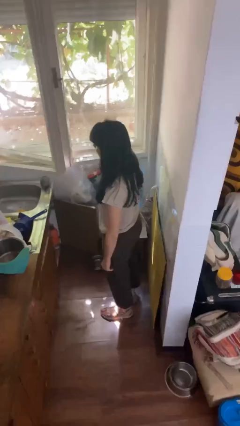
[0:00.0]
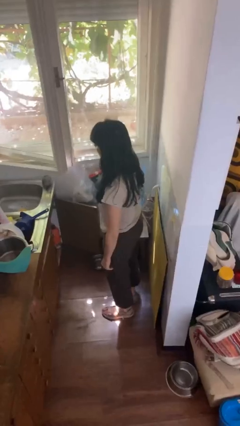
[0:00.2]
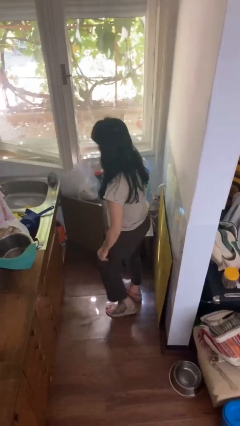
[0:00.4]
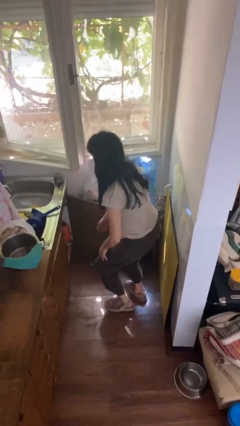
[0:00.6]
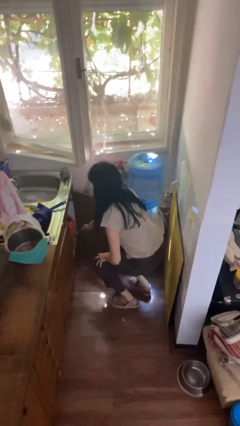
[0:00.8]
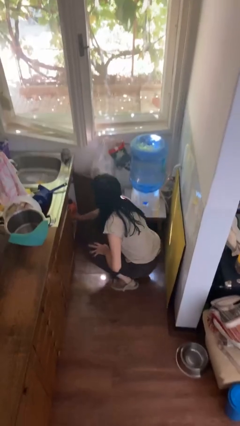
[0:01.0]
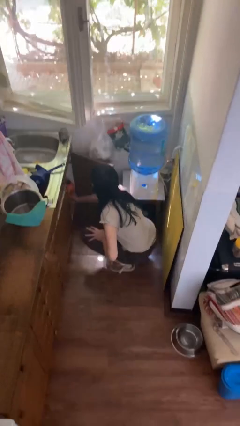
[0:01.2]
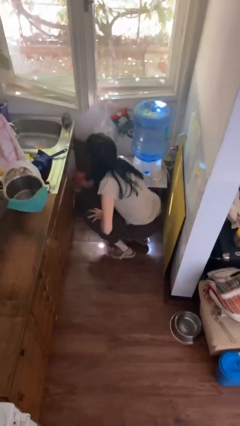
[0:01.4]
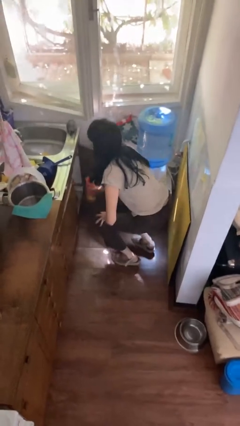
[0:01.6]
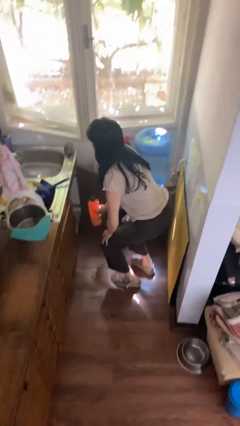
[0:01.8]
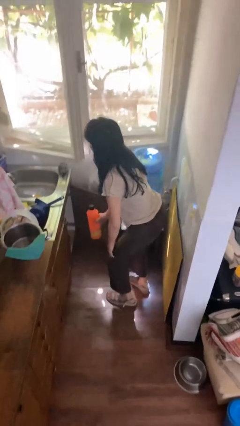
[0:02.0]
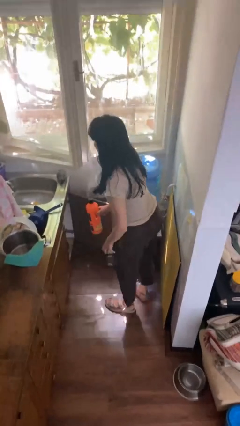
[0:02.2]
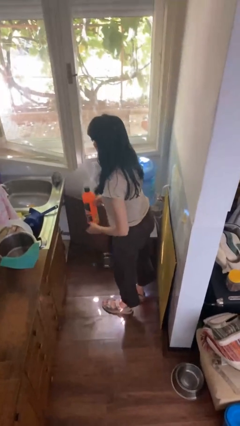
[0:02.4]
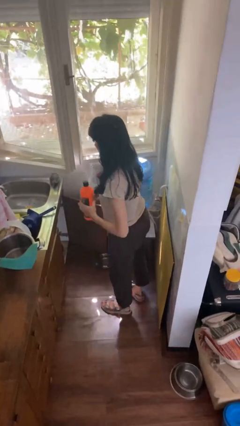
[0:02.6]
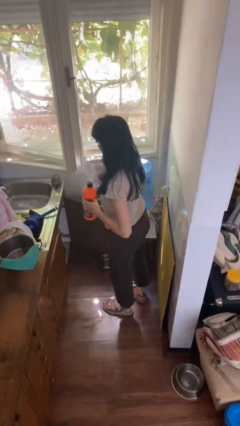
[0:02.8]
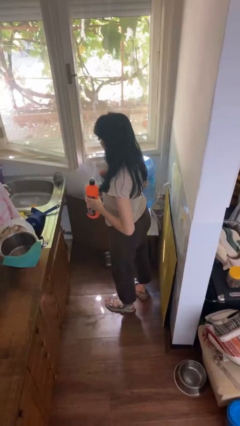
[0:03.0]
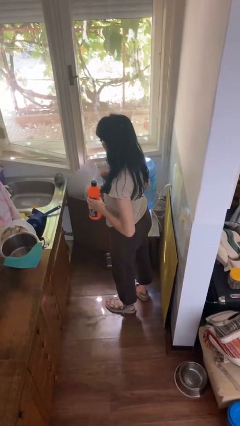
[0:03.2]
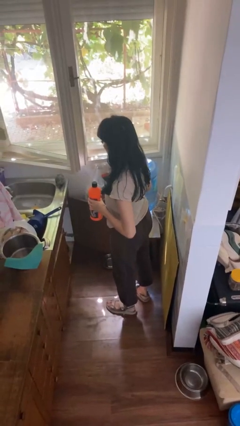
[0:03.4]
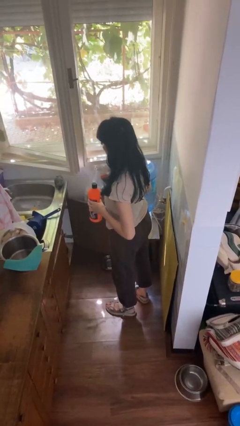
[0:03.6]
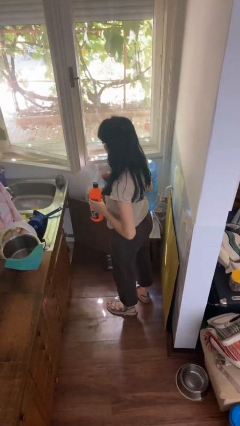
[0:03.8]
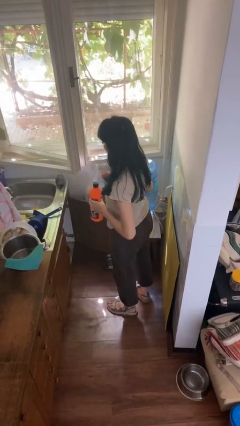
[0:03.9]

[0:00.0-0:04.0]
person picks up object from cabinet

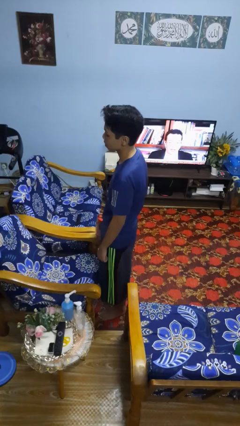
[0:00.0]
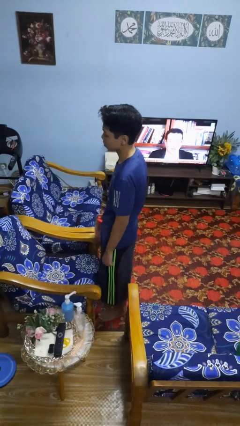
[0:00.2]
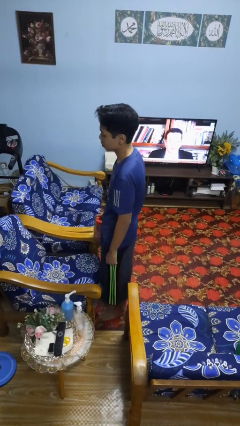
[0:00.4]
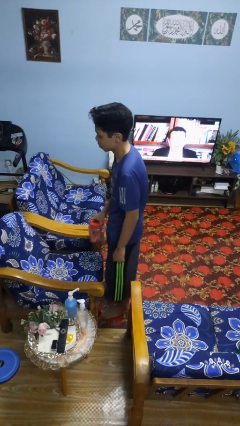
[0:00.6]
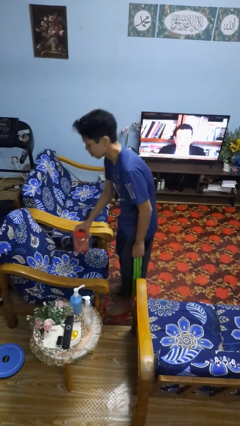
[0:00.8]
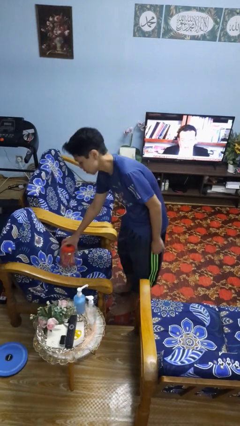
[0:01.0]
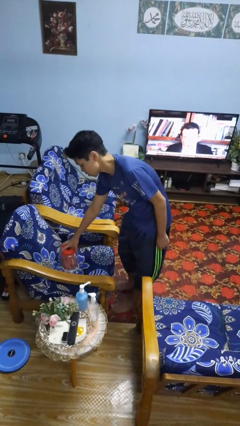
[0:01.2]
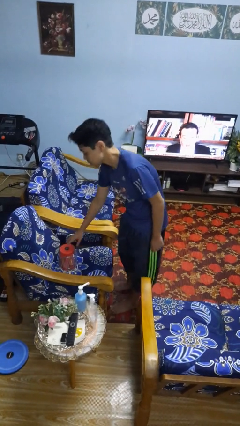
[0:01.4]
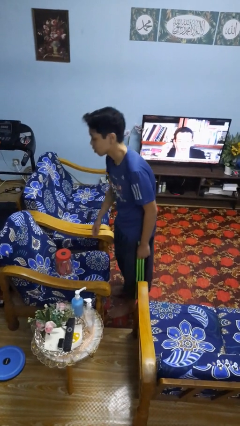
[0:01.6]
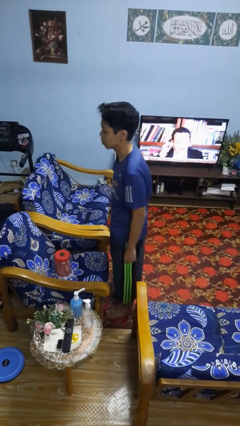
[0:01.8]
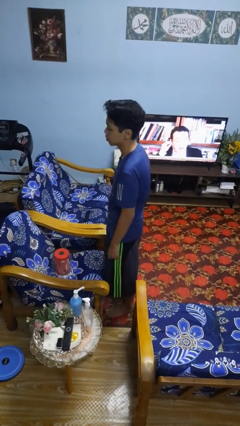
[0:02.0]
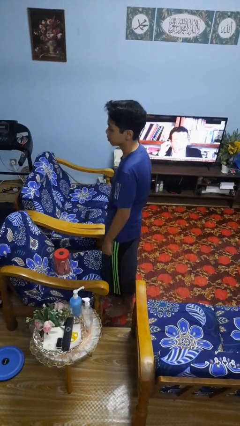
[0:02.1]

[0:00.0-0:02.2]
person puts down object on couch

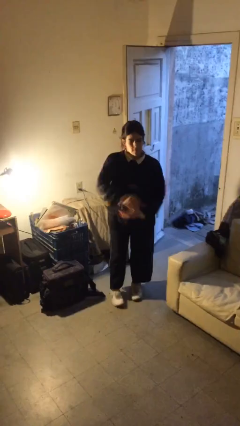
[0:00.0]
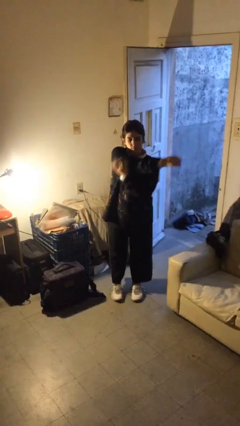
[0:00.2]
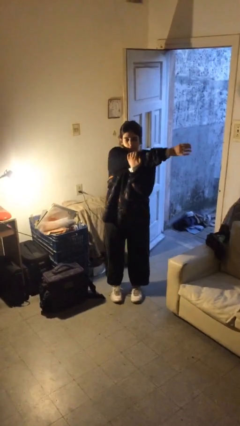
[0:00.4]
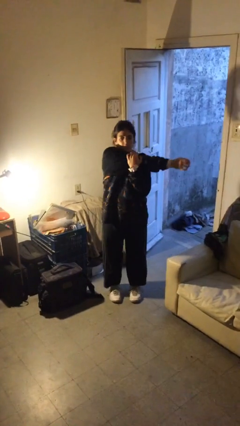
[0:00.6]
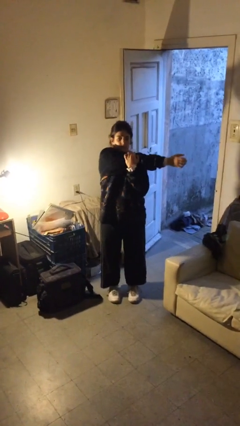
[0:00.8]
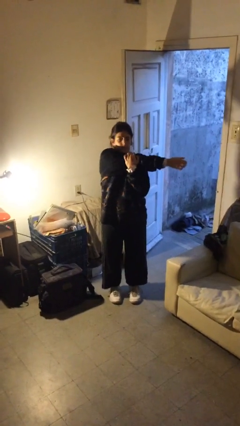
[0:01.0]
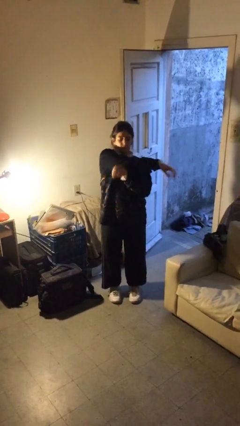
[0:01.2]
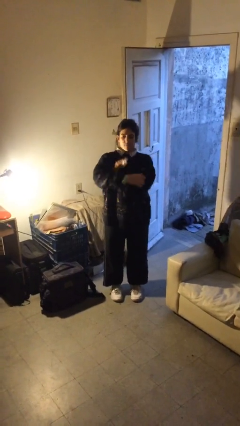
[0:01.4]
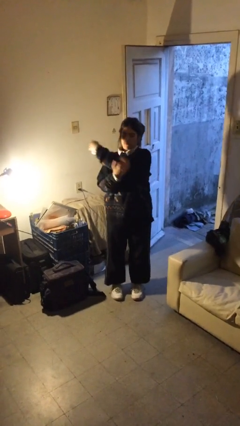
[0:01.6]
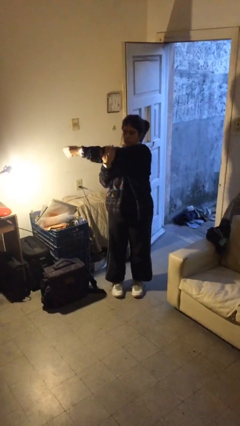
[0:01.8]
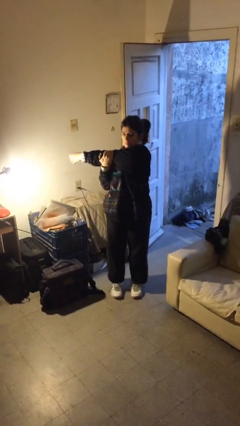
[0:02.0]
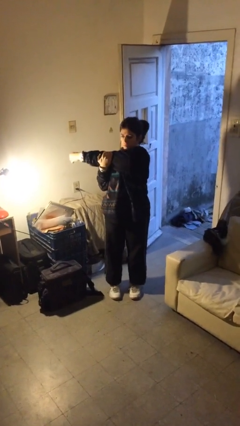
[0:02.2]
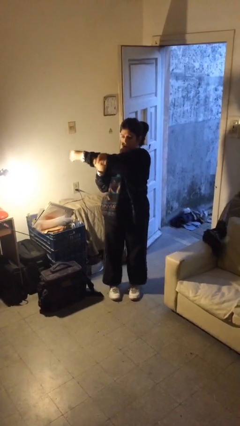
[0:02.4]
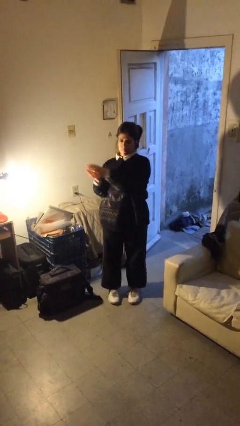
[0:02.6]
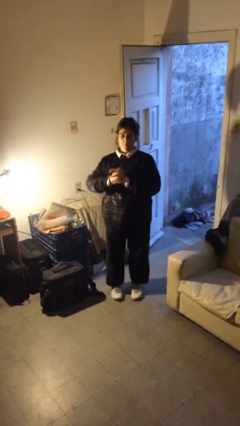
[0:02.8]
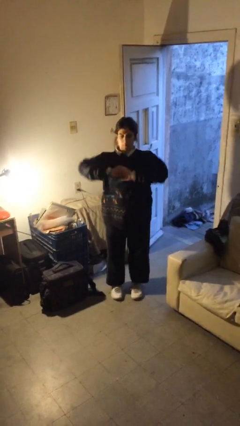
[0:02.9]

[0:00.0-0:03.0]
person stretches arms to side

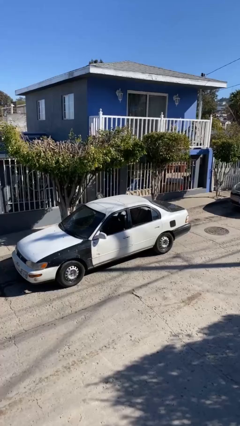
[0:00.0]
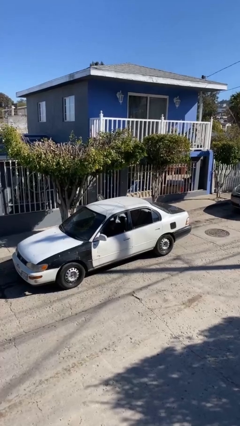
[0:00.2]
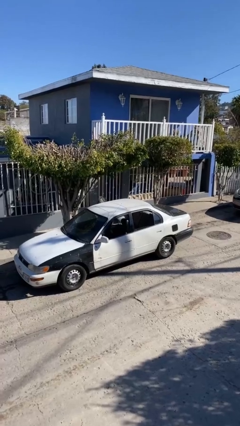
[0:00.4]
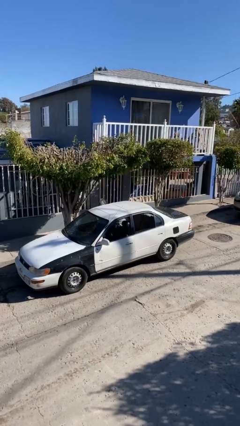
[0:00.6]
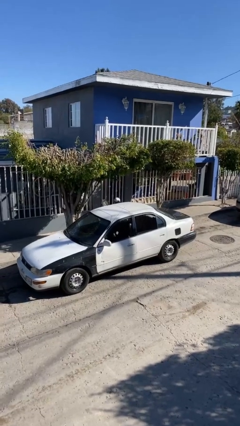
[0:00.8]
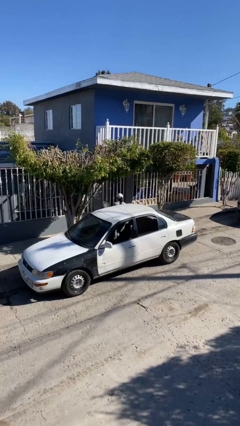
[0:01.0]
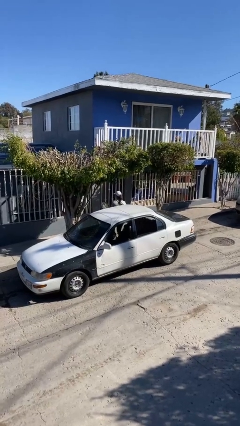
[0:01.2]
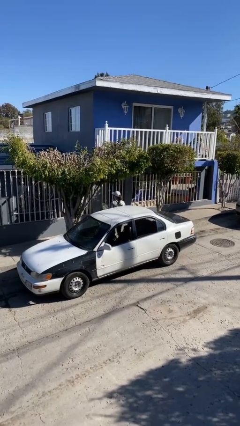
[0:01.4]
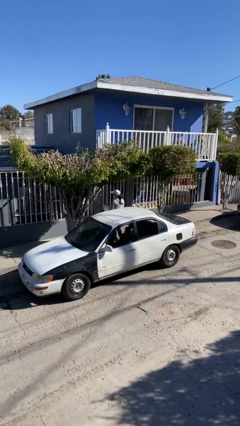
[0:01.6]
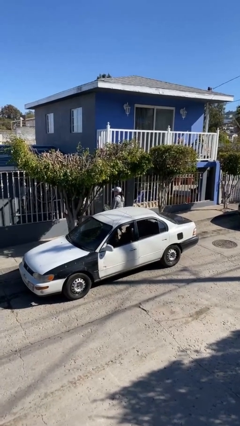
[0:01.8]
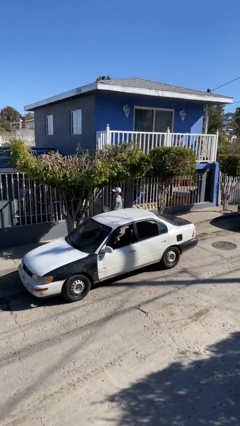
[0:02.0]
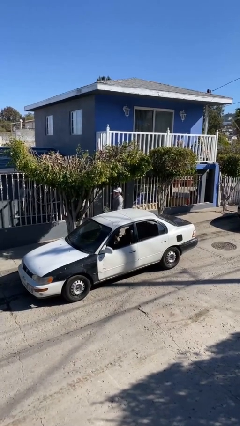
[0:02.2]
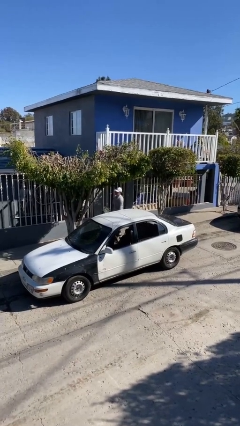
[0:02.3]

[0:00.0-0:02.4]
person exits car

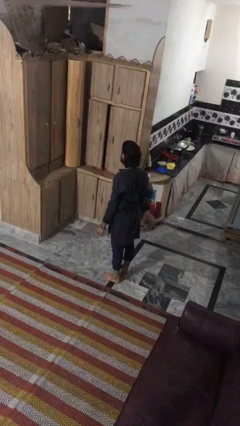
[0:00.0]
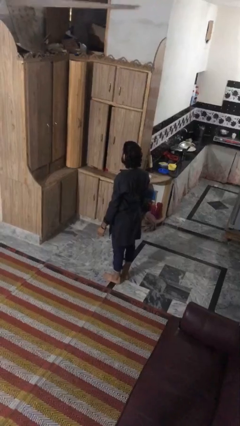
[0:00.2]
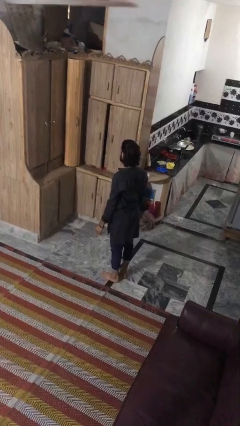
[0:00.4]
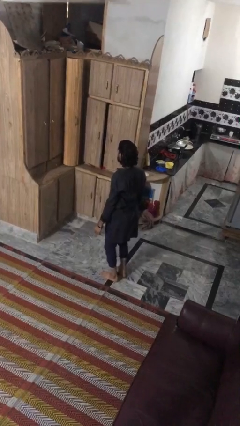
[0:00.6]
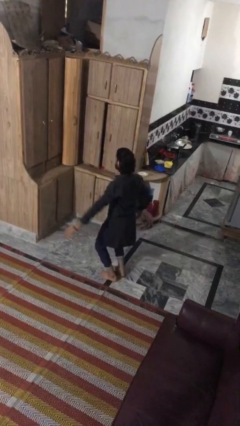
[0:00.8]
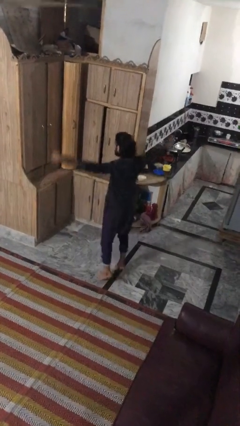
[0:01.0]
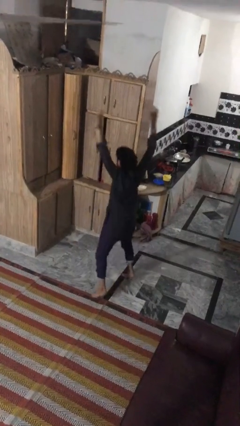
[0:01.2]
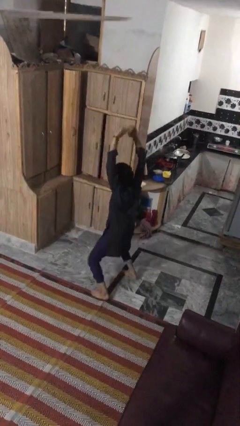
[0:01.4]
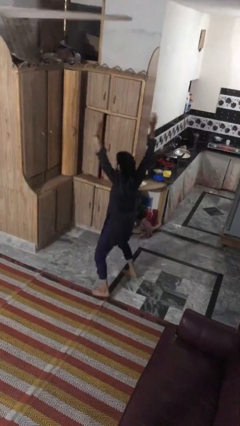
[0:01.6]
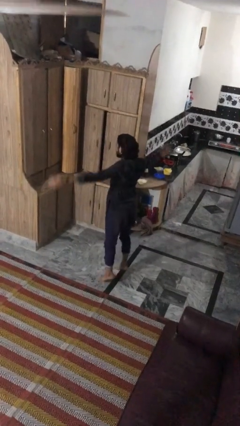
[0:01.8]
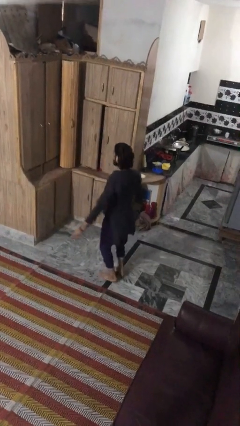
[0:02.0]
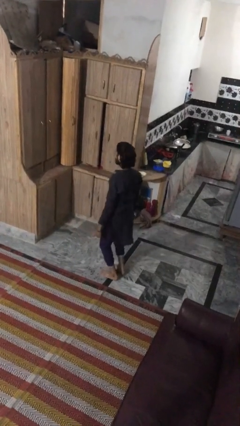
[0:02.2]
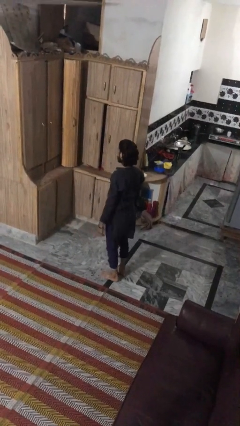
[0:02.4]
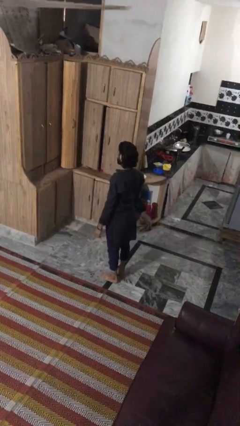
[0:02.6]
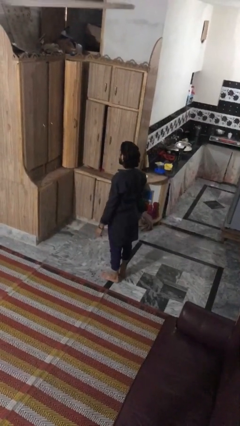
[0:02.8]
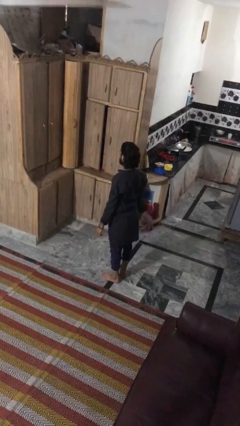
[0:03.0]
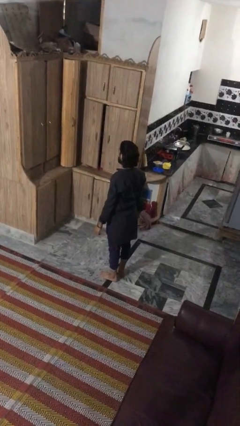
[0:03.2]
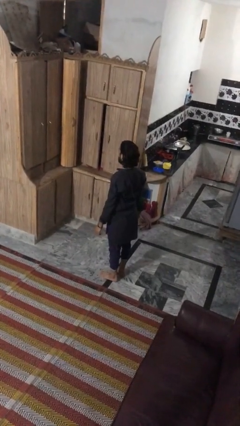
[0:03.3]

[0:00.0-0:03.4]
person exercises with jumping jacks

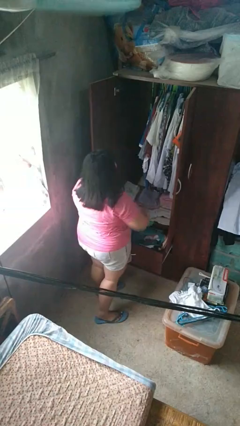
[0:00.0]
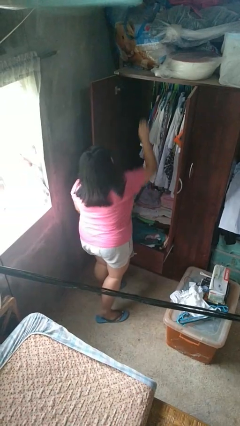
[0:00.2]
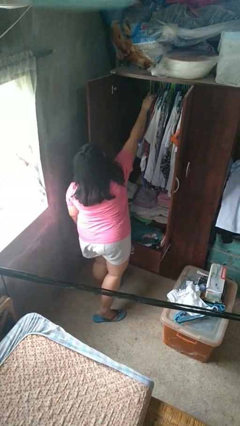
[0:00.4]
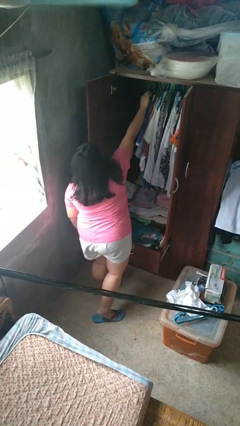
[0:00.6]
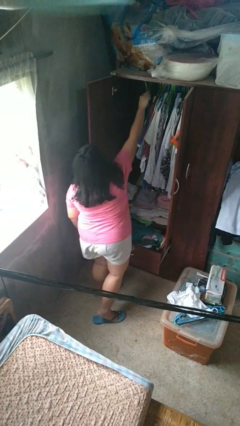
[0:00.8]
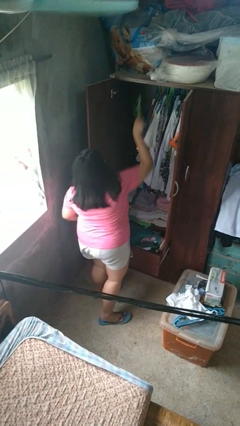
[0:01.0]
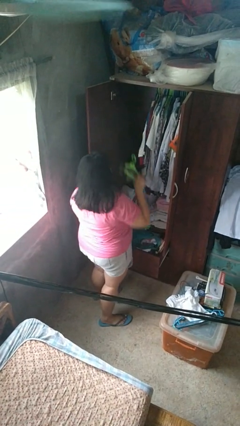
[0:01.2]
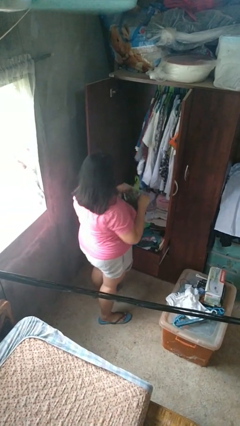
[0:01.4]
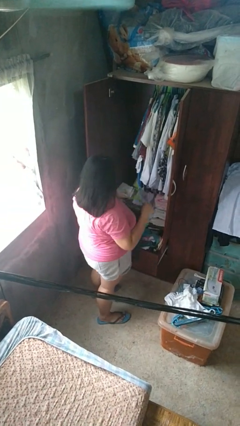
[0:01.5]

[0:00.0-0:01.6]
person takes clothes from closet

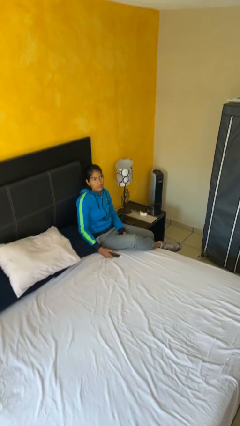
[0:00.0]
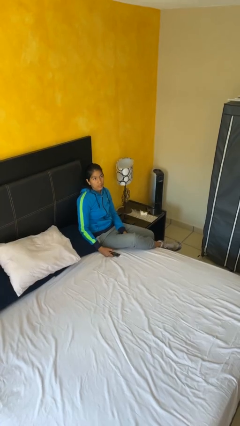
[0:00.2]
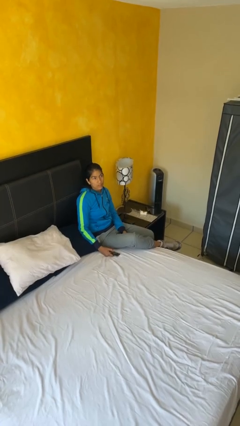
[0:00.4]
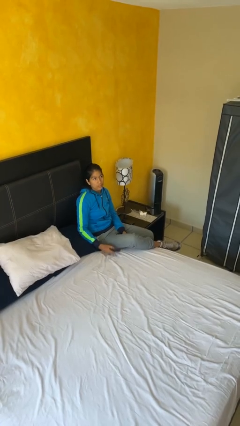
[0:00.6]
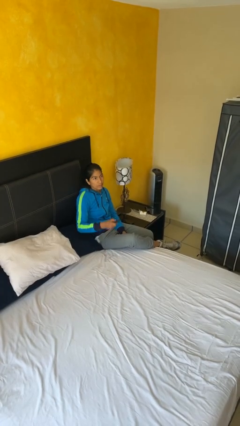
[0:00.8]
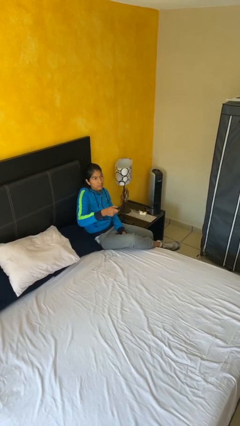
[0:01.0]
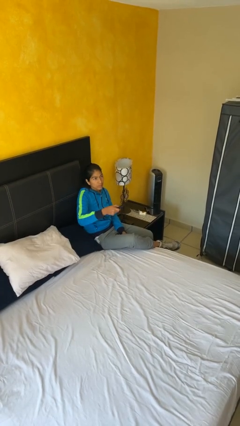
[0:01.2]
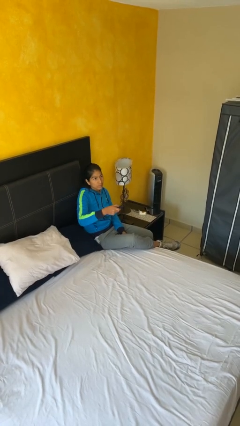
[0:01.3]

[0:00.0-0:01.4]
person uses television remote
